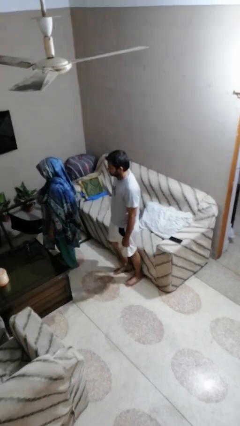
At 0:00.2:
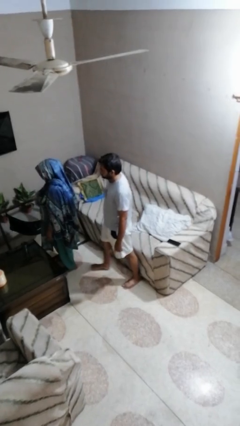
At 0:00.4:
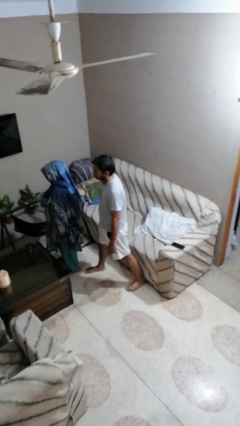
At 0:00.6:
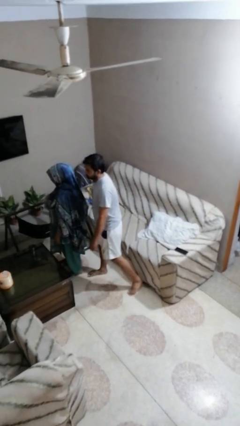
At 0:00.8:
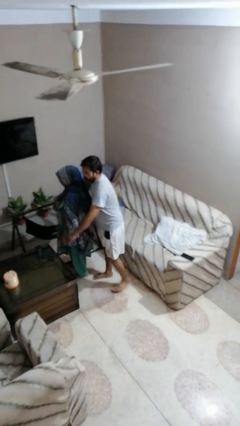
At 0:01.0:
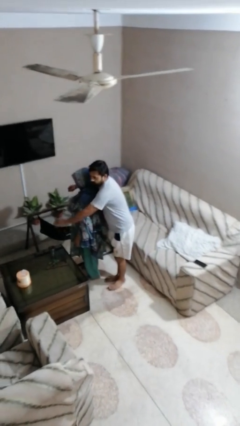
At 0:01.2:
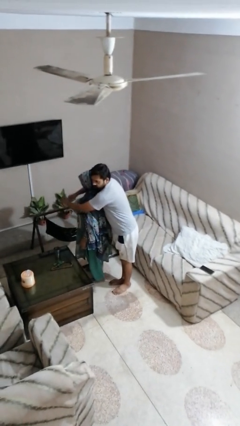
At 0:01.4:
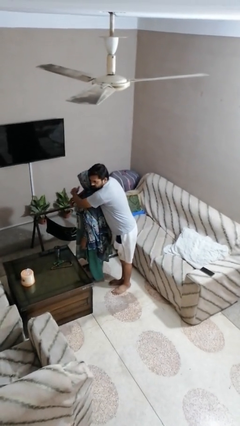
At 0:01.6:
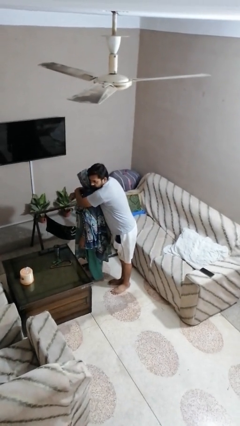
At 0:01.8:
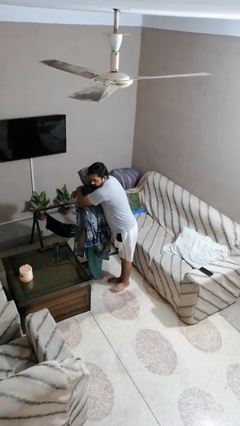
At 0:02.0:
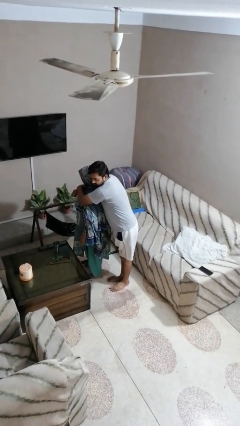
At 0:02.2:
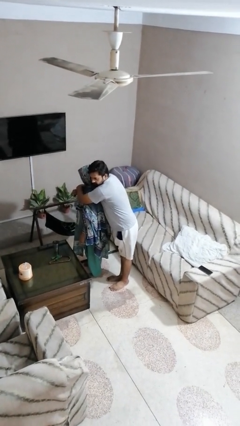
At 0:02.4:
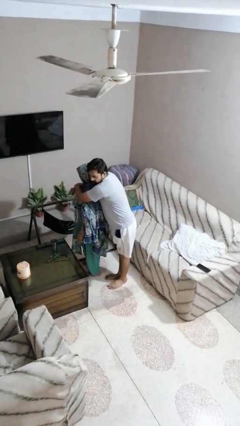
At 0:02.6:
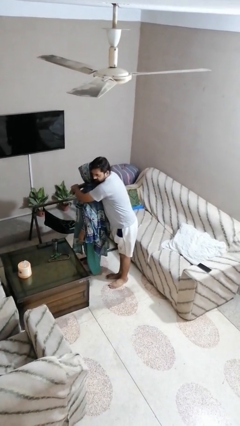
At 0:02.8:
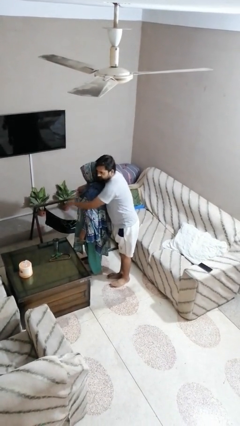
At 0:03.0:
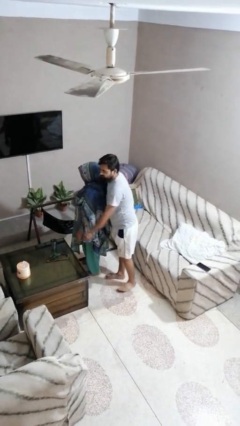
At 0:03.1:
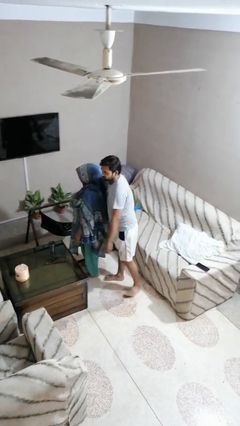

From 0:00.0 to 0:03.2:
person hugs person from behind

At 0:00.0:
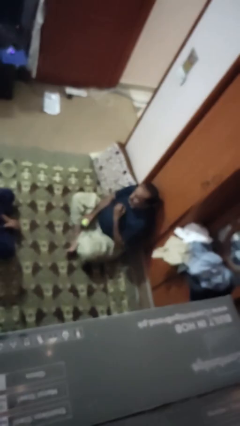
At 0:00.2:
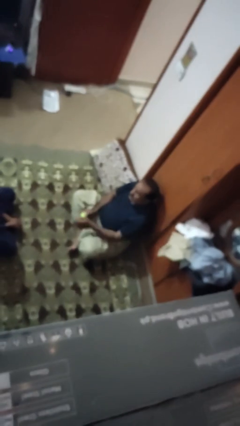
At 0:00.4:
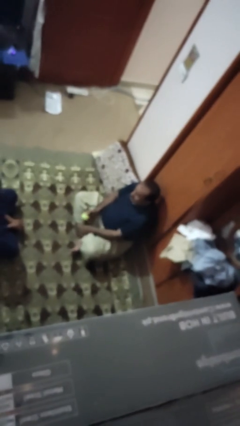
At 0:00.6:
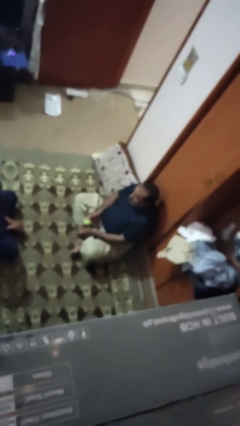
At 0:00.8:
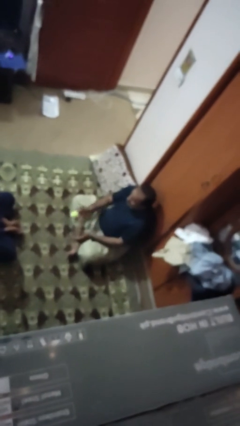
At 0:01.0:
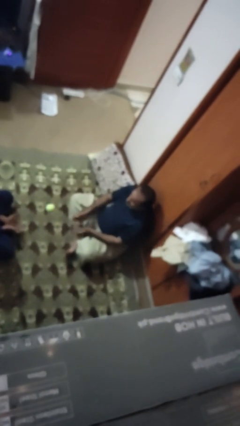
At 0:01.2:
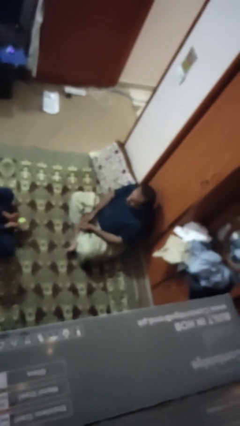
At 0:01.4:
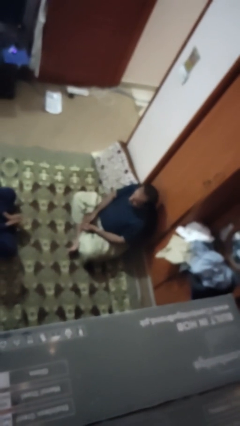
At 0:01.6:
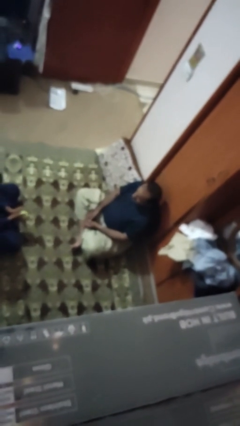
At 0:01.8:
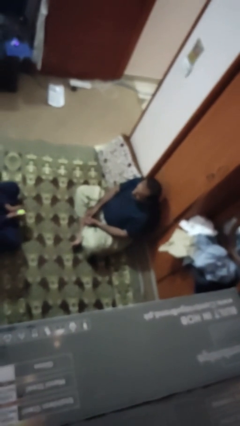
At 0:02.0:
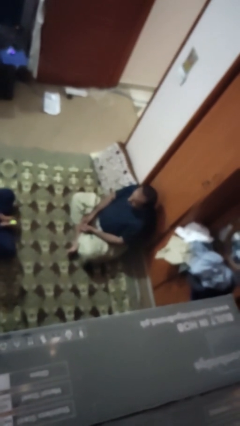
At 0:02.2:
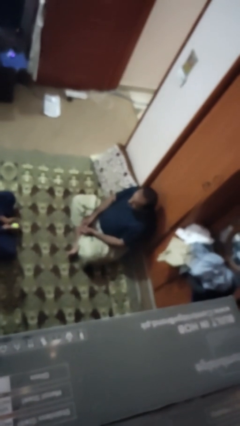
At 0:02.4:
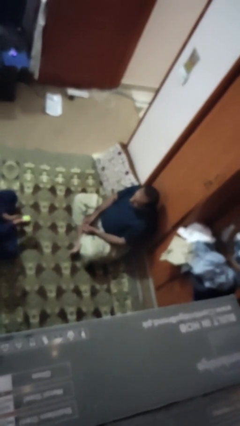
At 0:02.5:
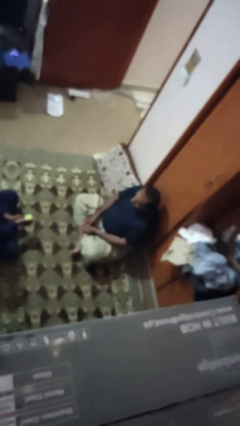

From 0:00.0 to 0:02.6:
person throws object to person

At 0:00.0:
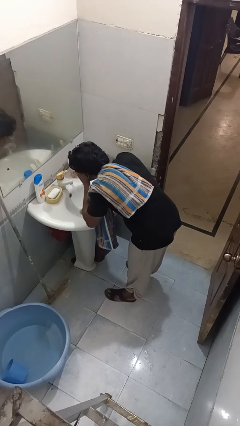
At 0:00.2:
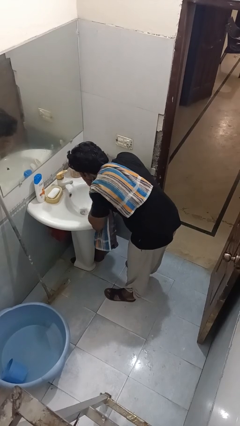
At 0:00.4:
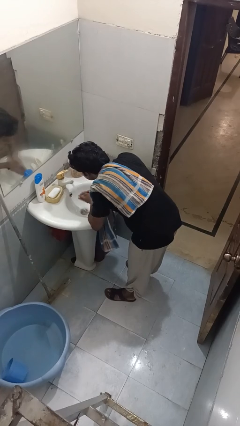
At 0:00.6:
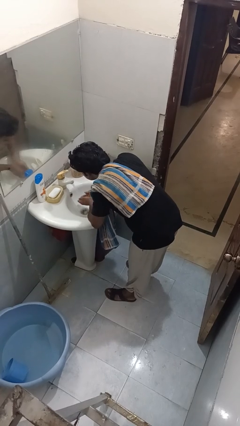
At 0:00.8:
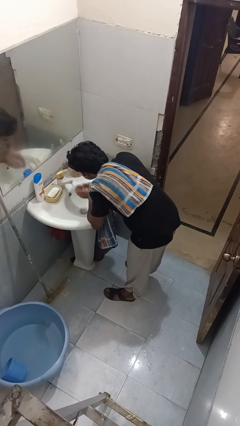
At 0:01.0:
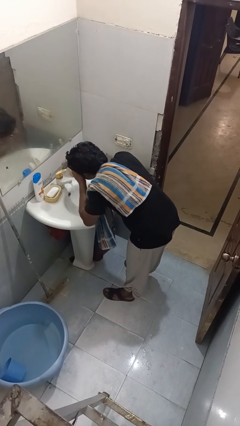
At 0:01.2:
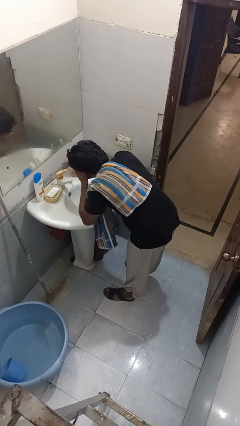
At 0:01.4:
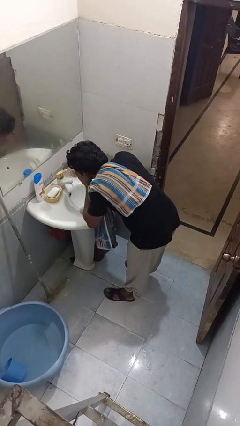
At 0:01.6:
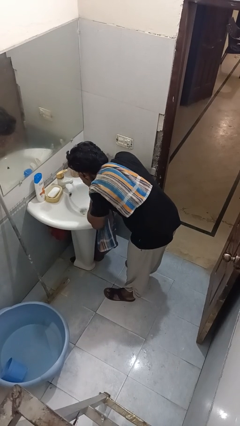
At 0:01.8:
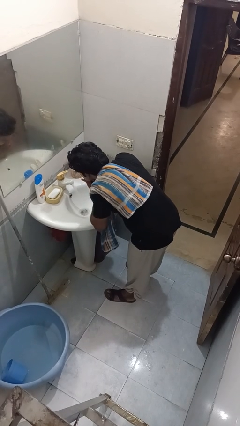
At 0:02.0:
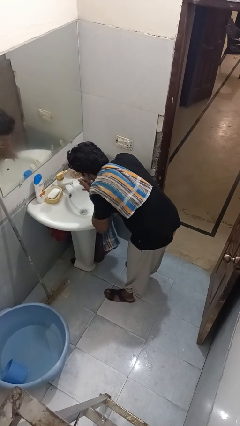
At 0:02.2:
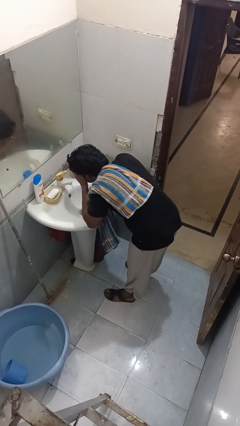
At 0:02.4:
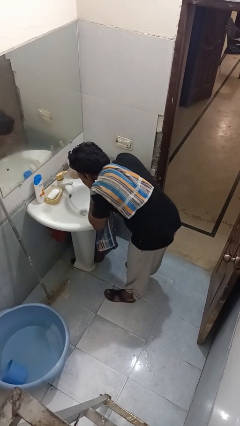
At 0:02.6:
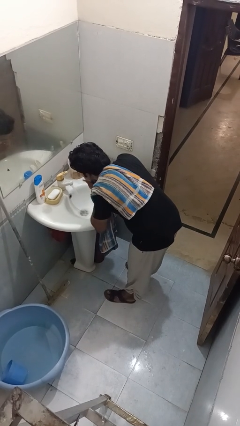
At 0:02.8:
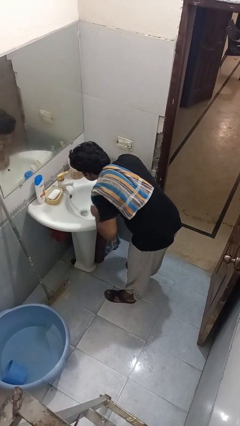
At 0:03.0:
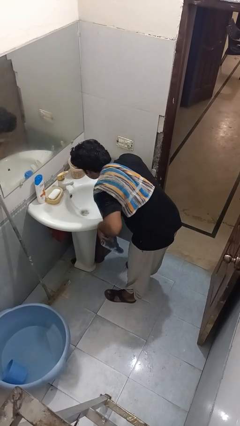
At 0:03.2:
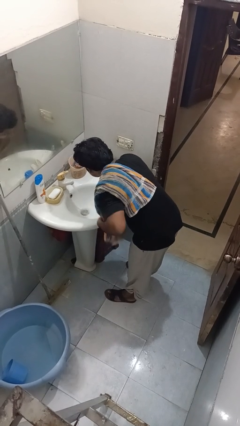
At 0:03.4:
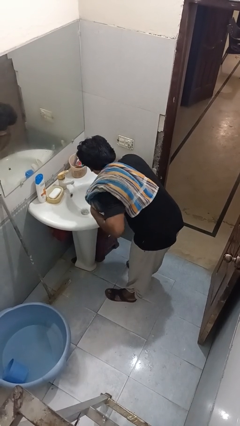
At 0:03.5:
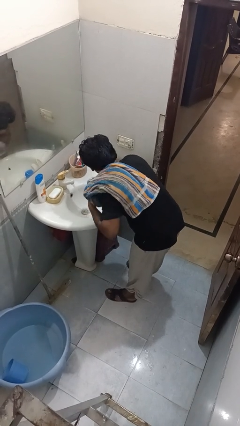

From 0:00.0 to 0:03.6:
person washes face

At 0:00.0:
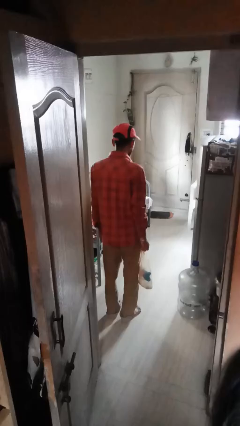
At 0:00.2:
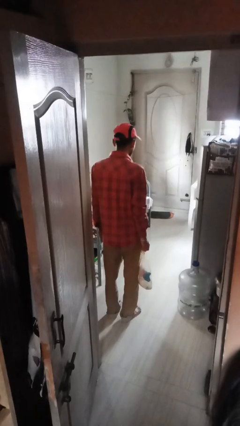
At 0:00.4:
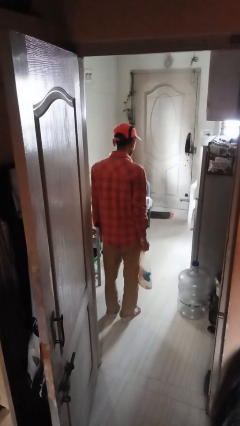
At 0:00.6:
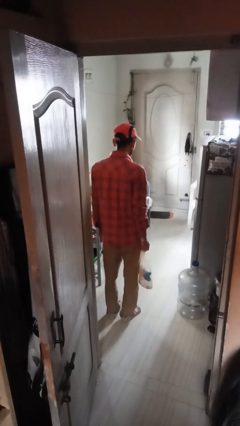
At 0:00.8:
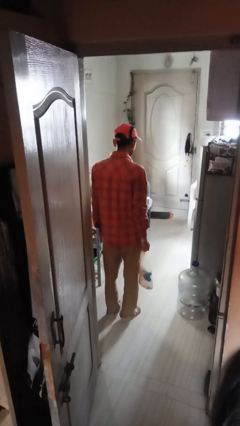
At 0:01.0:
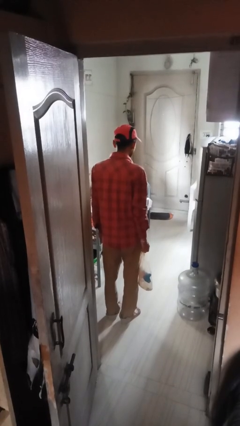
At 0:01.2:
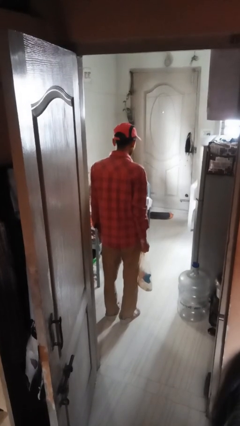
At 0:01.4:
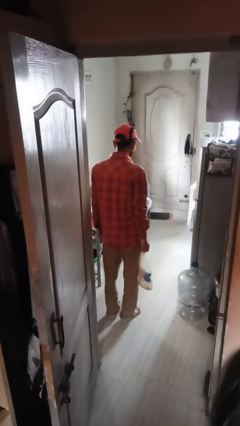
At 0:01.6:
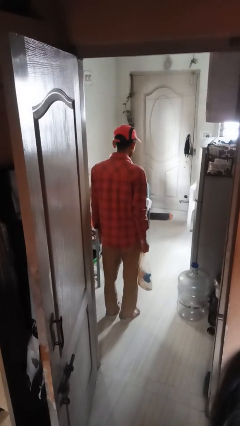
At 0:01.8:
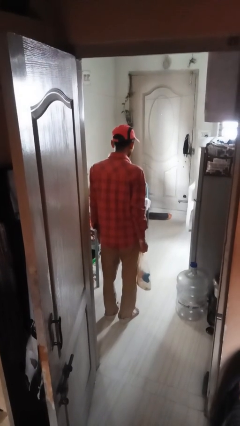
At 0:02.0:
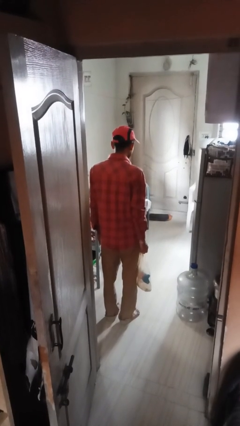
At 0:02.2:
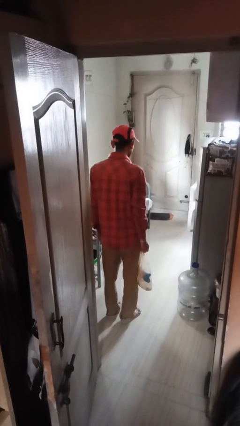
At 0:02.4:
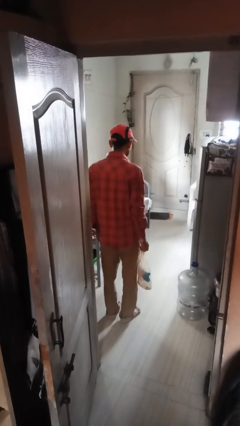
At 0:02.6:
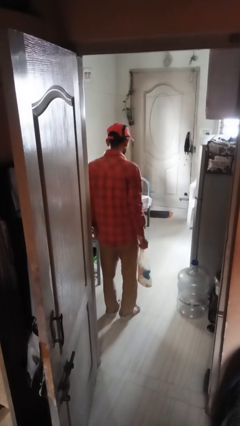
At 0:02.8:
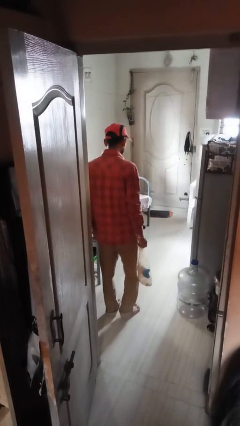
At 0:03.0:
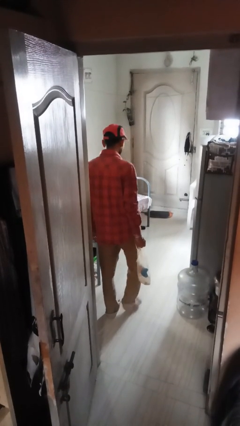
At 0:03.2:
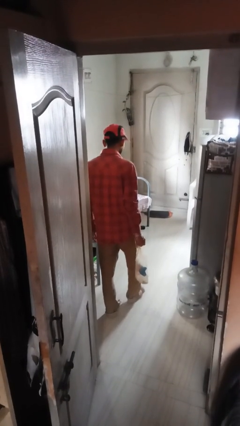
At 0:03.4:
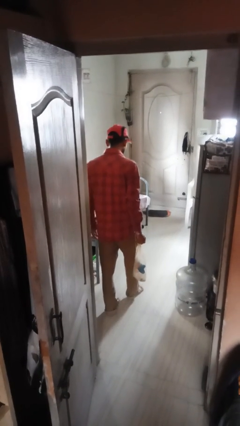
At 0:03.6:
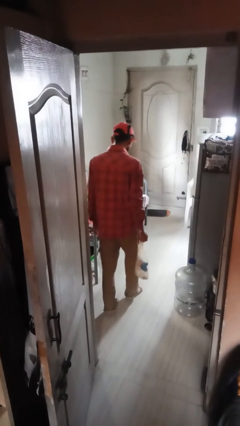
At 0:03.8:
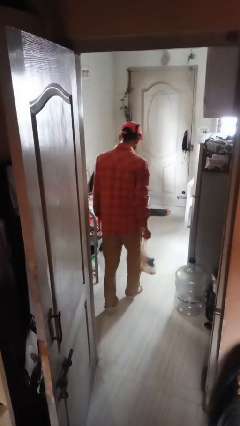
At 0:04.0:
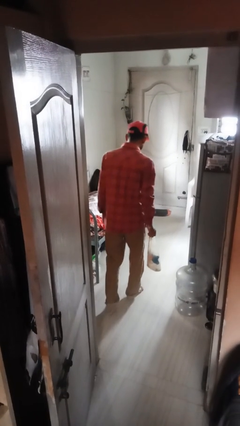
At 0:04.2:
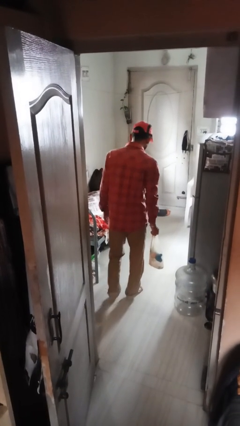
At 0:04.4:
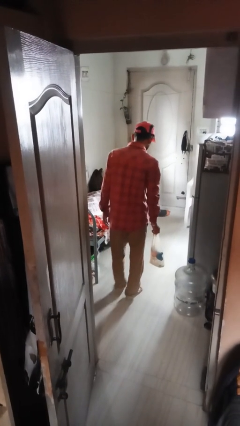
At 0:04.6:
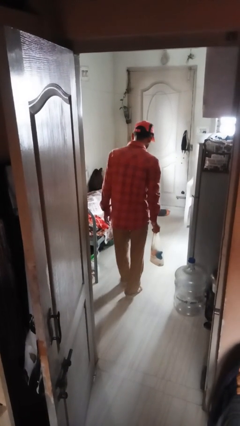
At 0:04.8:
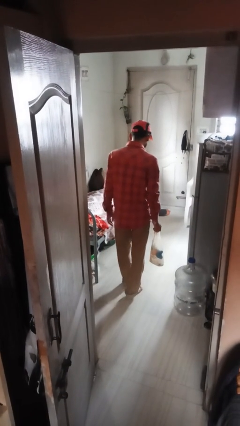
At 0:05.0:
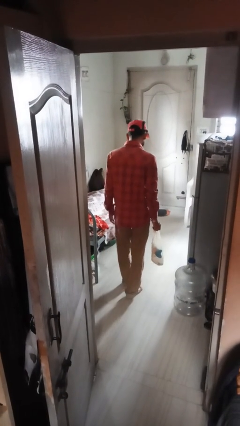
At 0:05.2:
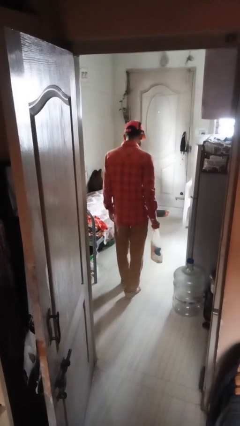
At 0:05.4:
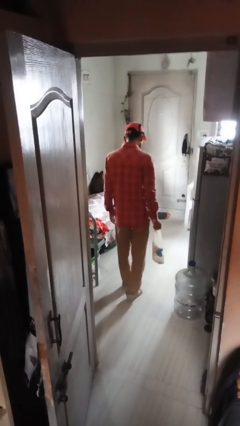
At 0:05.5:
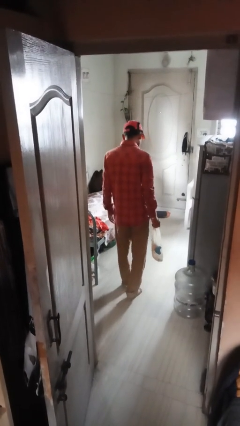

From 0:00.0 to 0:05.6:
person carries groceries

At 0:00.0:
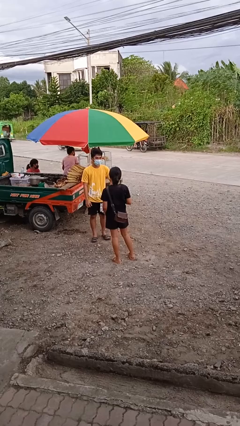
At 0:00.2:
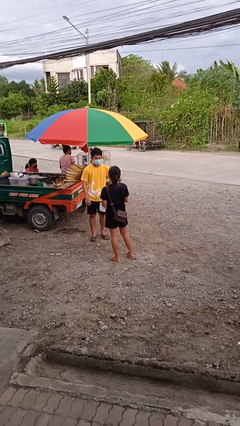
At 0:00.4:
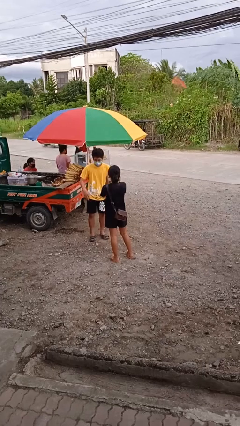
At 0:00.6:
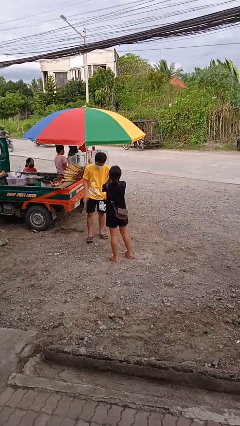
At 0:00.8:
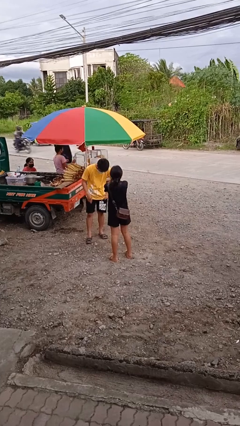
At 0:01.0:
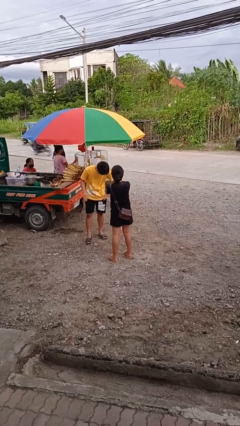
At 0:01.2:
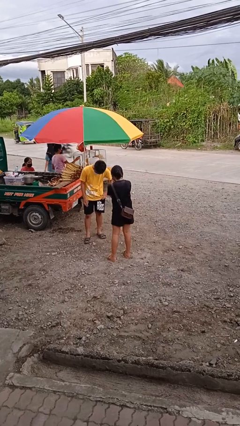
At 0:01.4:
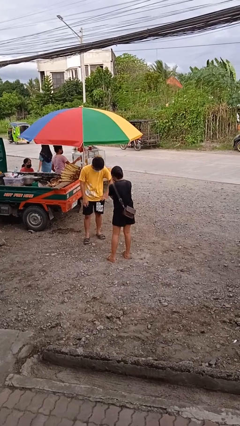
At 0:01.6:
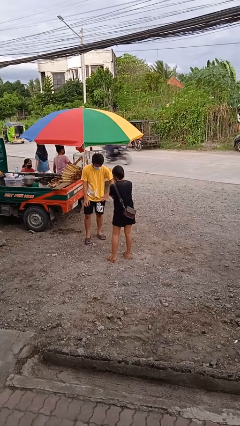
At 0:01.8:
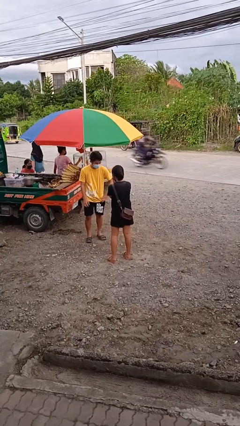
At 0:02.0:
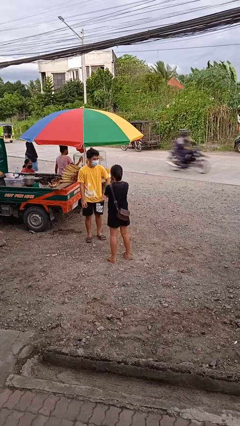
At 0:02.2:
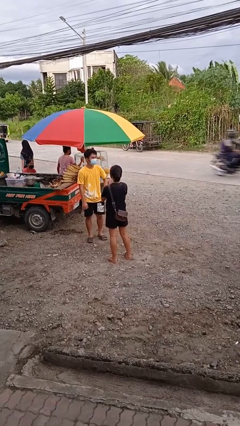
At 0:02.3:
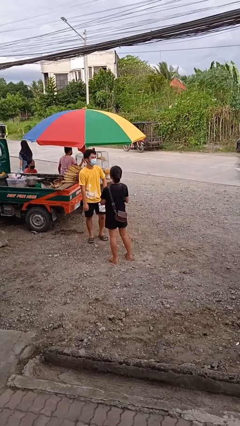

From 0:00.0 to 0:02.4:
person laughs with person
